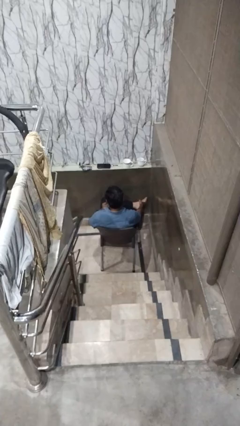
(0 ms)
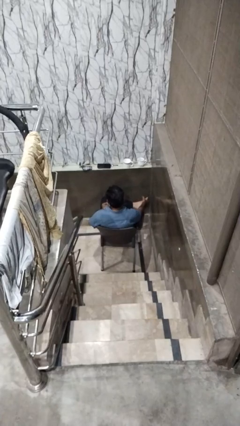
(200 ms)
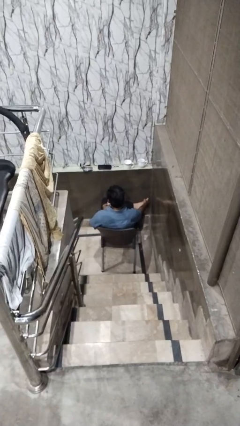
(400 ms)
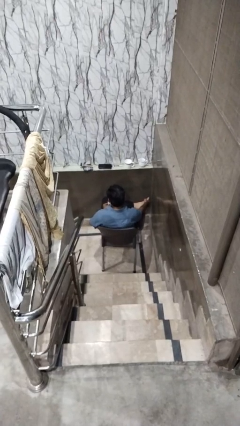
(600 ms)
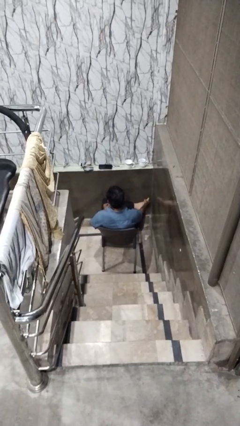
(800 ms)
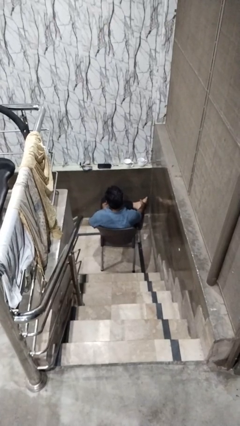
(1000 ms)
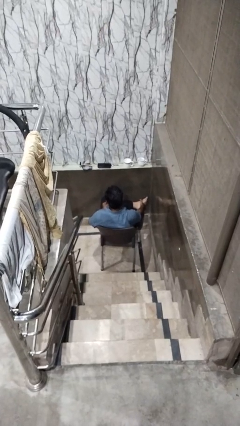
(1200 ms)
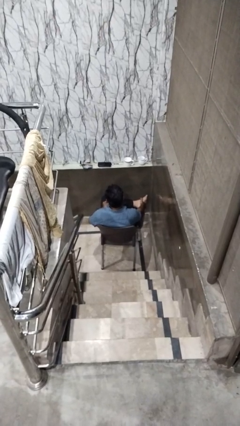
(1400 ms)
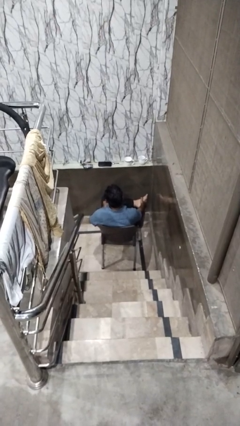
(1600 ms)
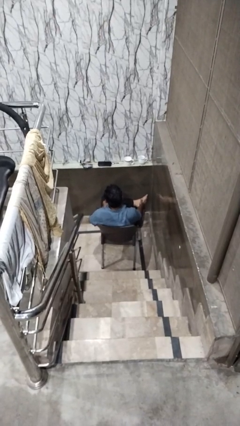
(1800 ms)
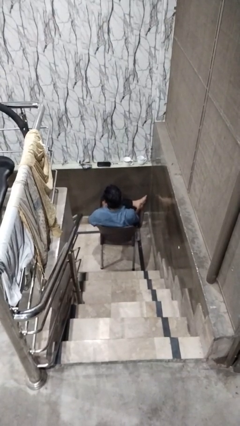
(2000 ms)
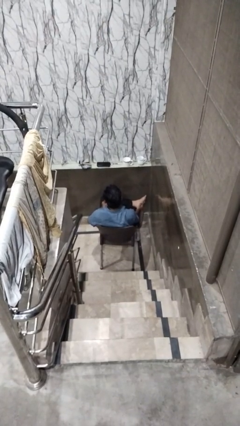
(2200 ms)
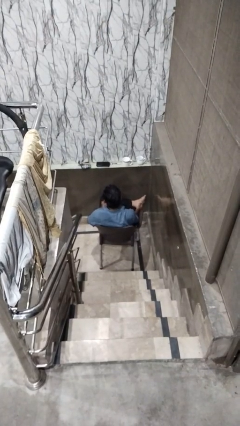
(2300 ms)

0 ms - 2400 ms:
person rubs foot

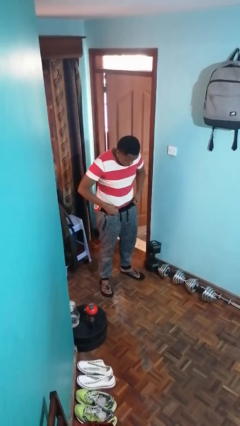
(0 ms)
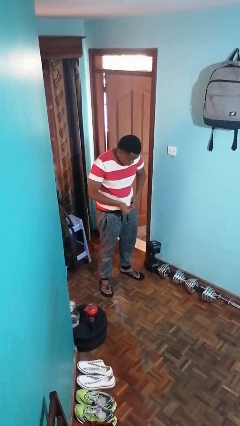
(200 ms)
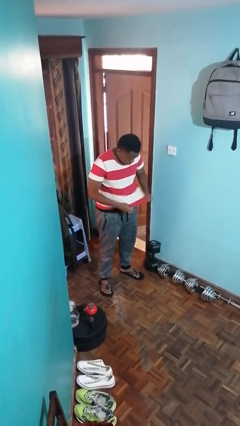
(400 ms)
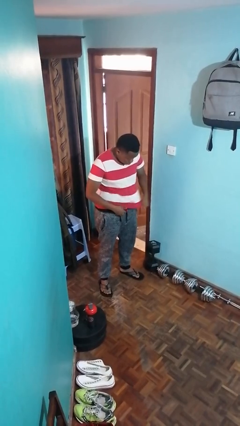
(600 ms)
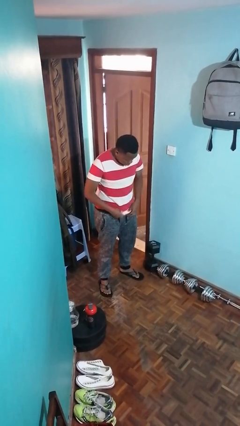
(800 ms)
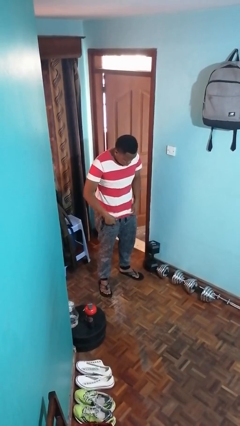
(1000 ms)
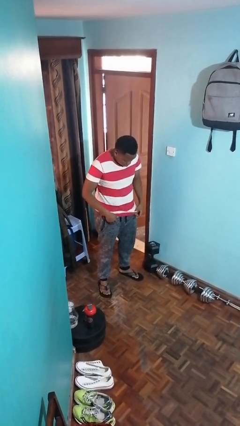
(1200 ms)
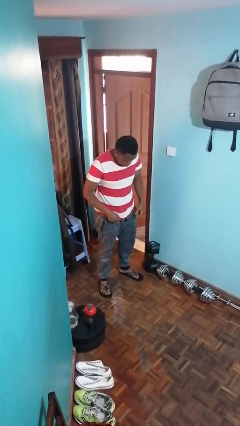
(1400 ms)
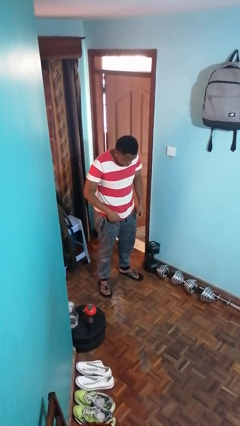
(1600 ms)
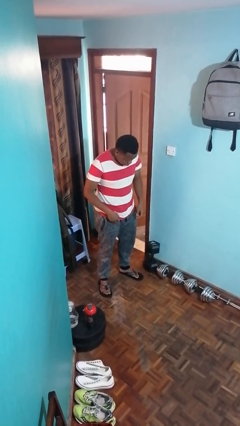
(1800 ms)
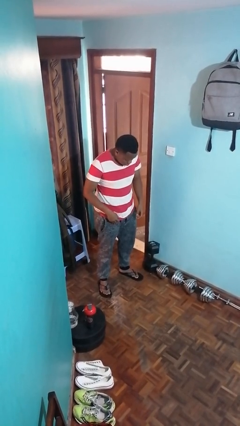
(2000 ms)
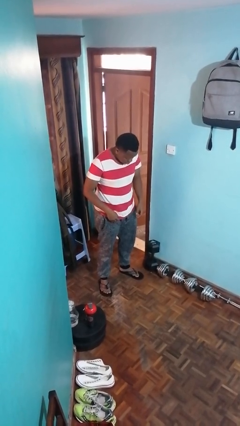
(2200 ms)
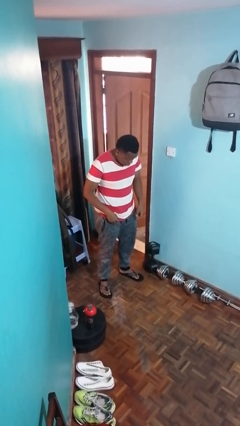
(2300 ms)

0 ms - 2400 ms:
person untucks shirt

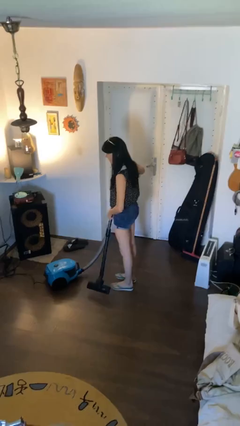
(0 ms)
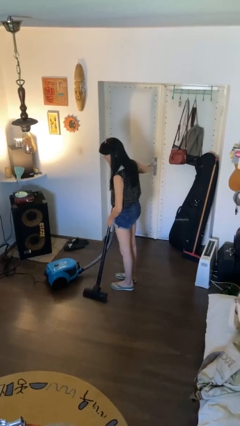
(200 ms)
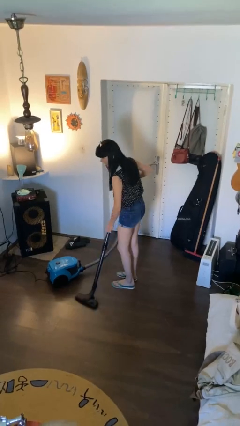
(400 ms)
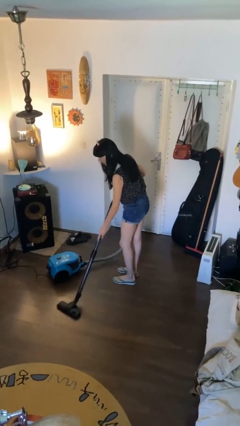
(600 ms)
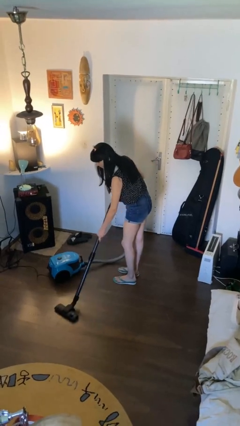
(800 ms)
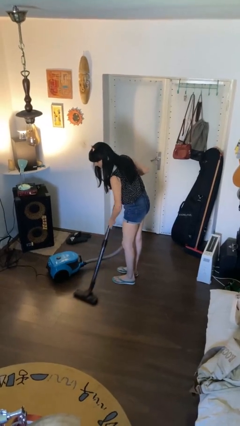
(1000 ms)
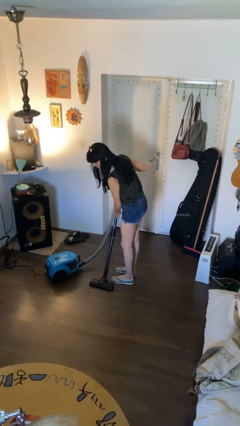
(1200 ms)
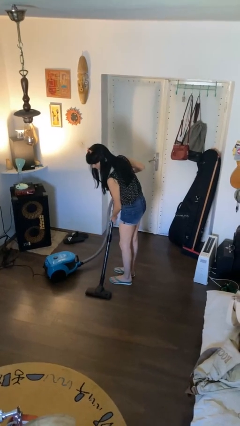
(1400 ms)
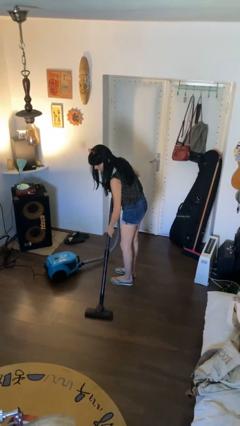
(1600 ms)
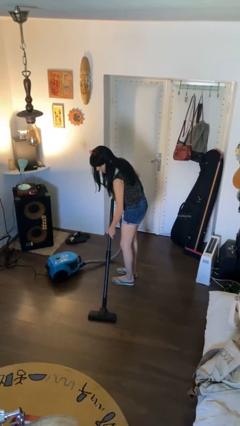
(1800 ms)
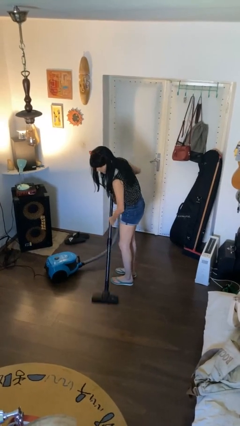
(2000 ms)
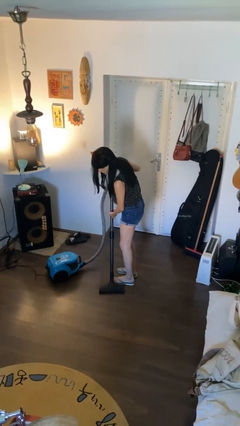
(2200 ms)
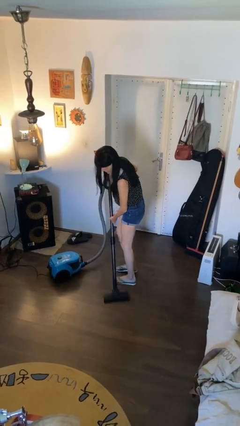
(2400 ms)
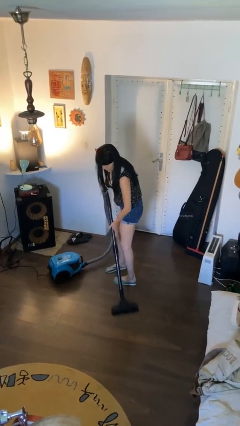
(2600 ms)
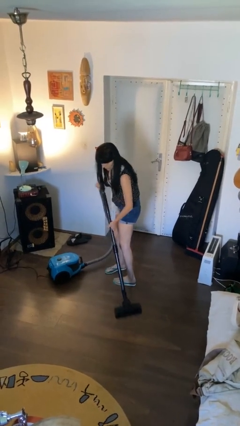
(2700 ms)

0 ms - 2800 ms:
person vacuums carpet

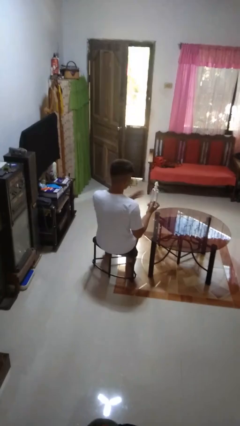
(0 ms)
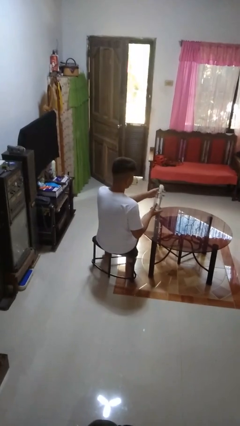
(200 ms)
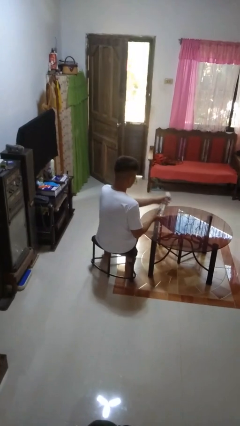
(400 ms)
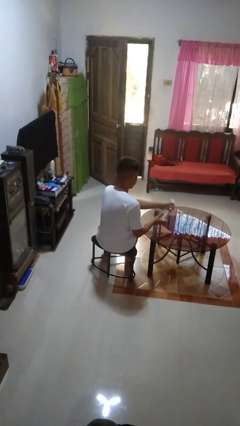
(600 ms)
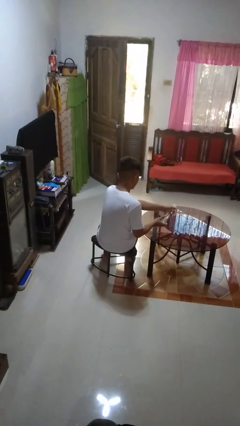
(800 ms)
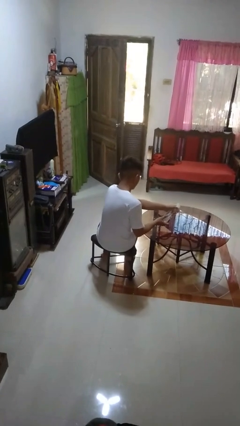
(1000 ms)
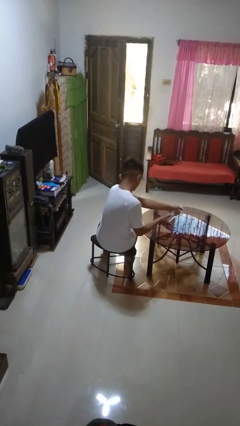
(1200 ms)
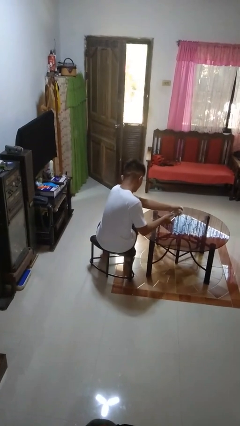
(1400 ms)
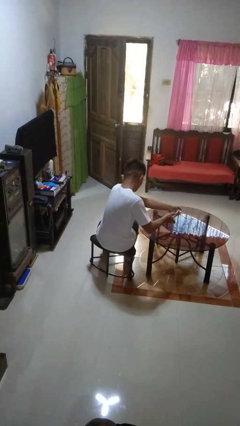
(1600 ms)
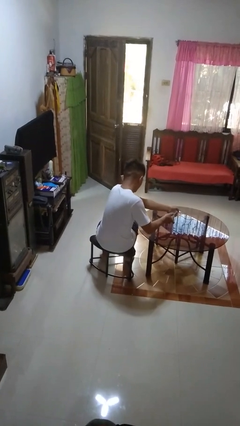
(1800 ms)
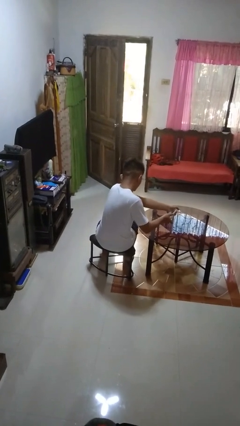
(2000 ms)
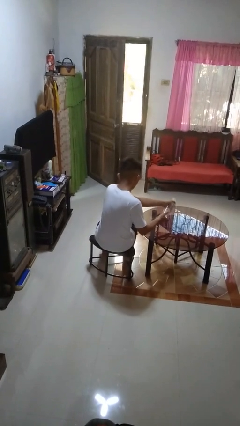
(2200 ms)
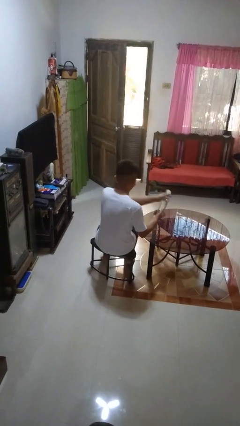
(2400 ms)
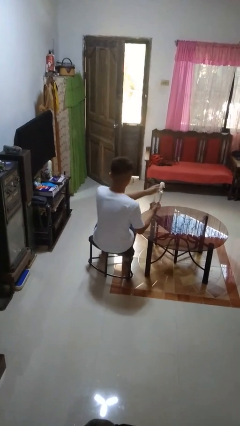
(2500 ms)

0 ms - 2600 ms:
person sprays from bottle

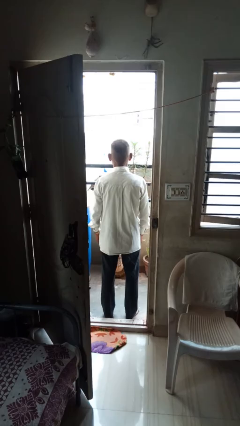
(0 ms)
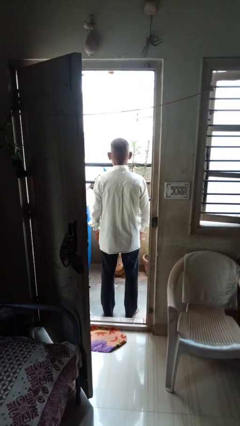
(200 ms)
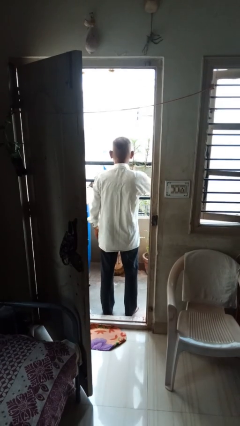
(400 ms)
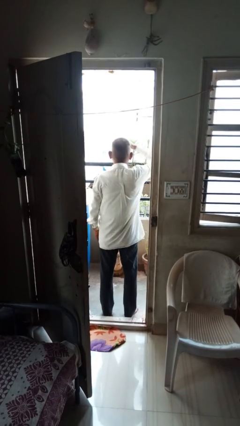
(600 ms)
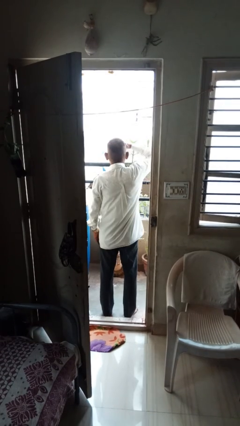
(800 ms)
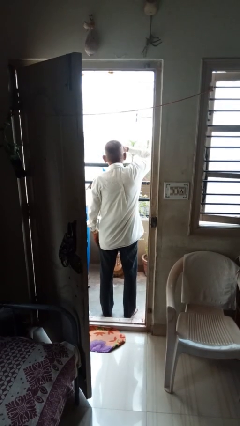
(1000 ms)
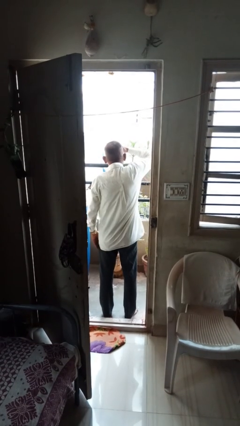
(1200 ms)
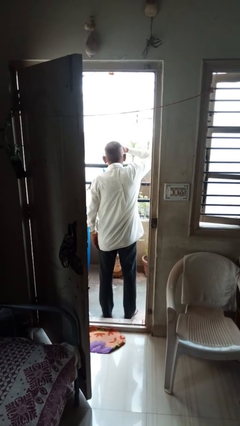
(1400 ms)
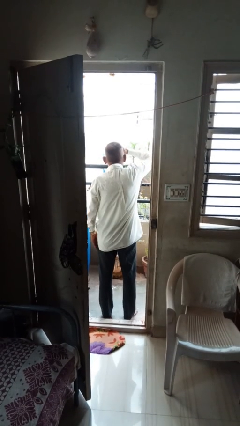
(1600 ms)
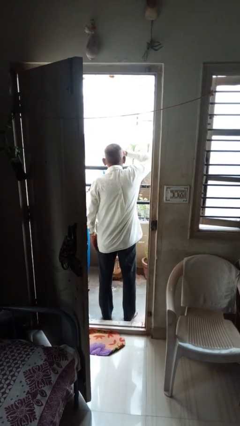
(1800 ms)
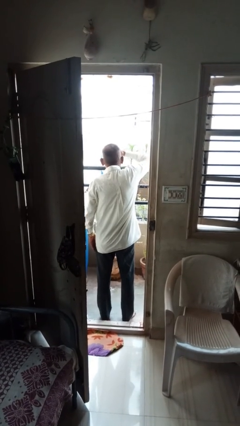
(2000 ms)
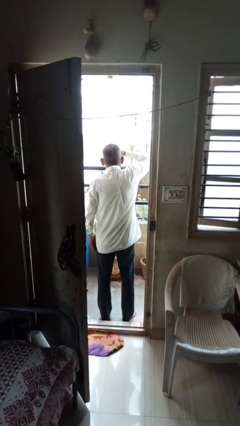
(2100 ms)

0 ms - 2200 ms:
person shades eyes

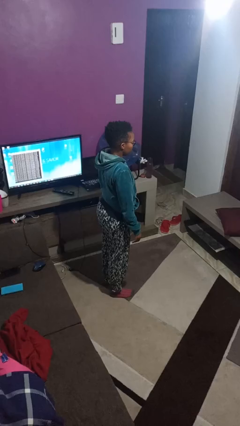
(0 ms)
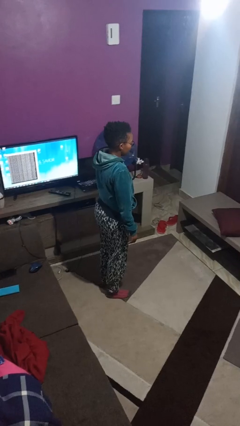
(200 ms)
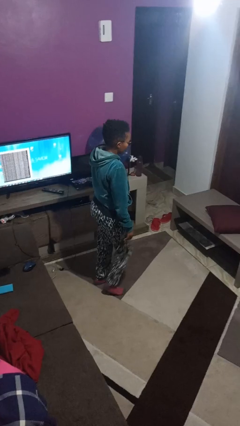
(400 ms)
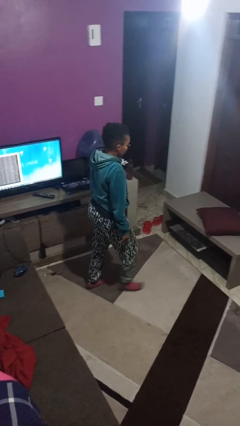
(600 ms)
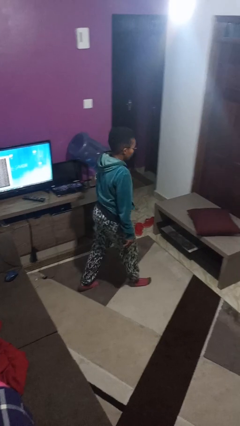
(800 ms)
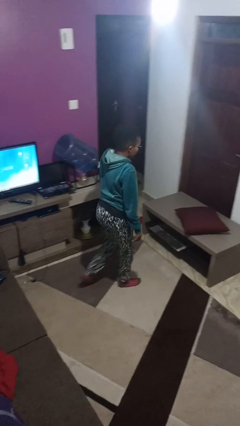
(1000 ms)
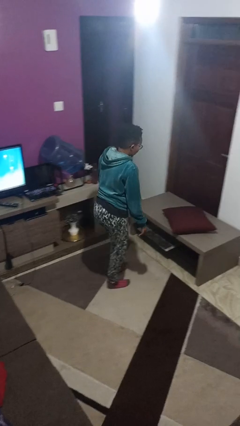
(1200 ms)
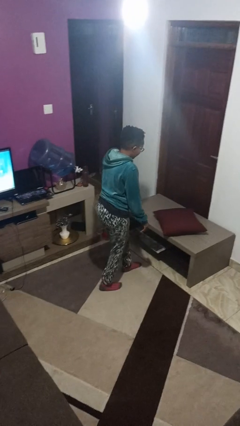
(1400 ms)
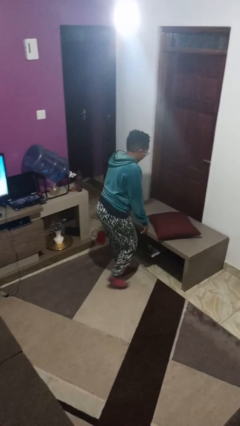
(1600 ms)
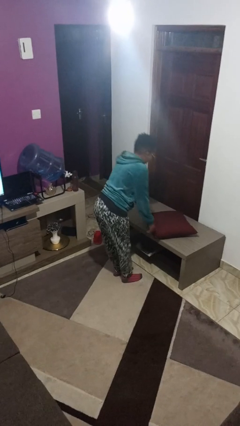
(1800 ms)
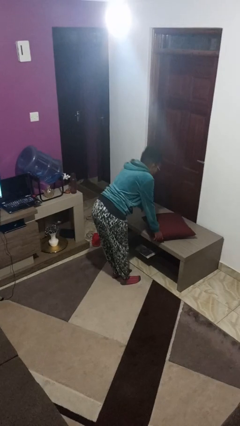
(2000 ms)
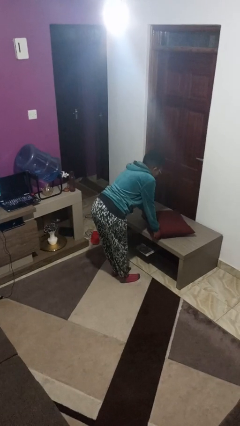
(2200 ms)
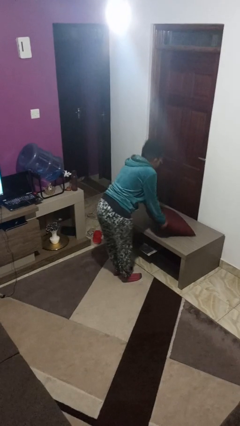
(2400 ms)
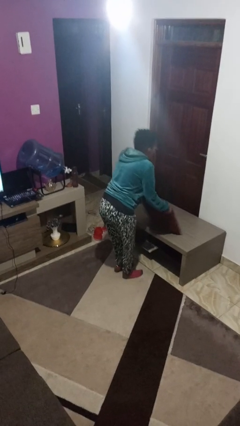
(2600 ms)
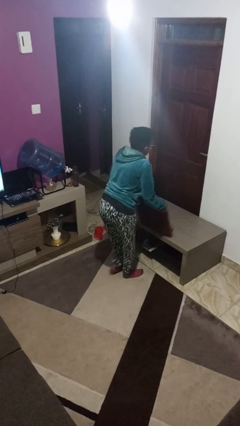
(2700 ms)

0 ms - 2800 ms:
person picks up object from table

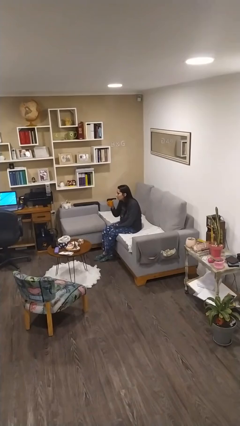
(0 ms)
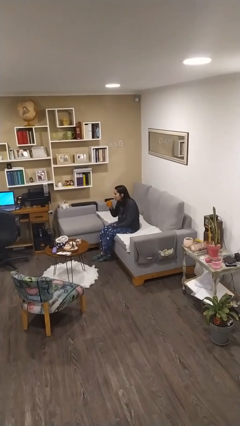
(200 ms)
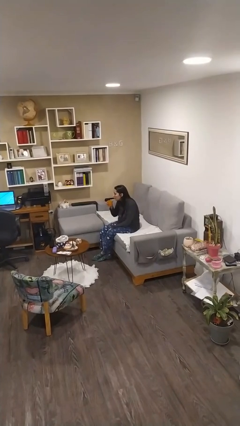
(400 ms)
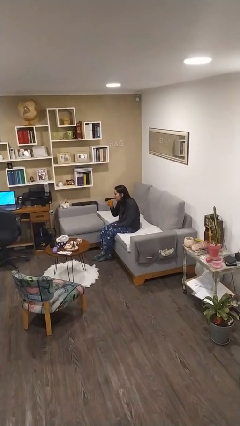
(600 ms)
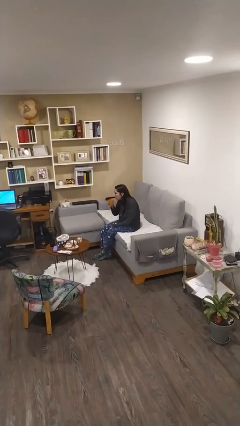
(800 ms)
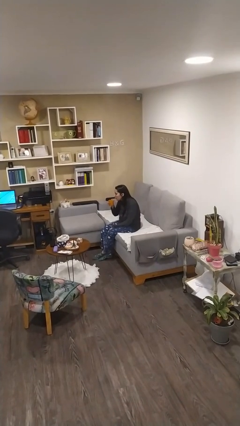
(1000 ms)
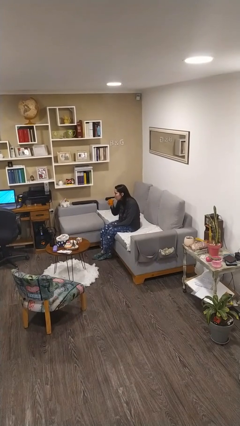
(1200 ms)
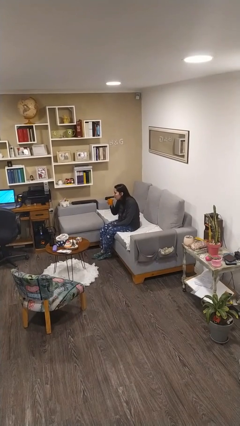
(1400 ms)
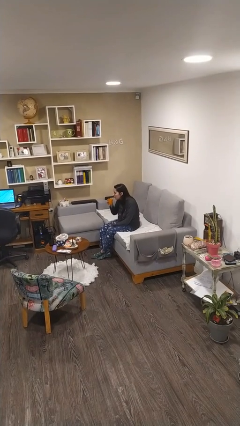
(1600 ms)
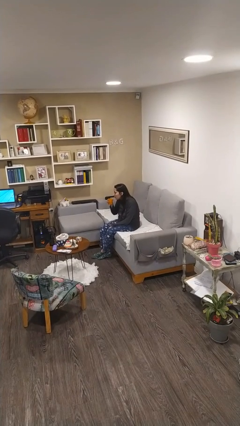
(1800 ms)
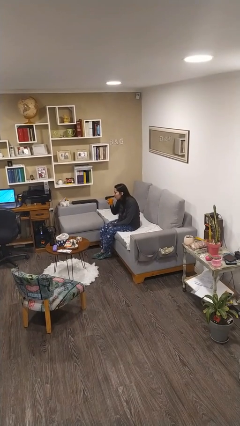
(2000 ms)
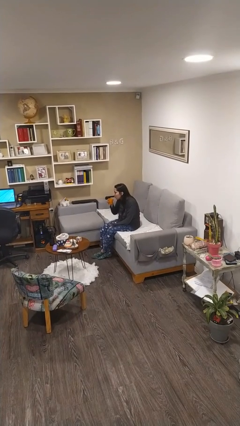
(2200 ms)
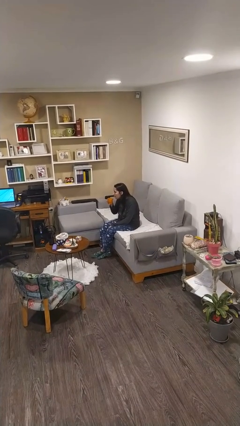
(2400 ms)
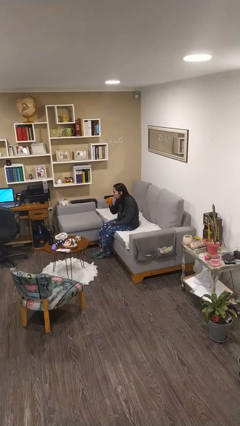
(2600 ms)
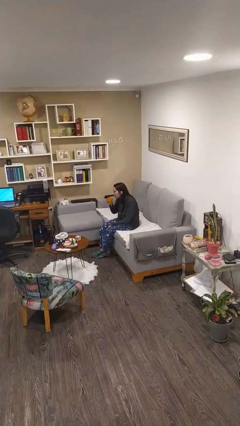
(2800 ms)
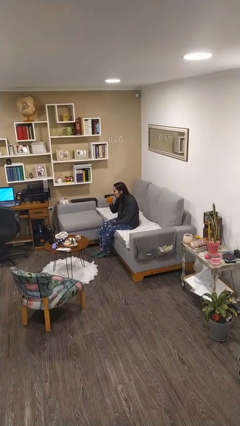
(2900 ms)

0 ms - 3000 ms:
person drinks from straw
